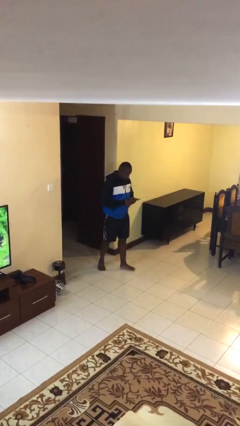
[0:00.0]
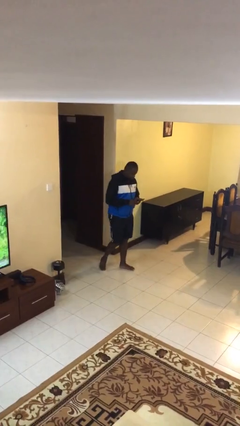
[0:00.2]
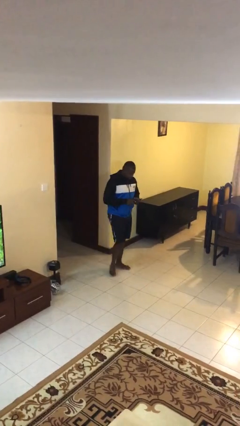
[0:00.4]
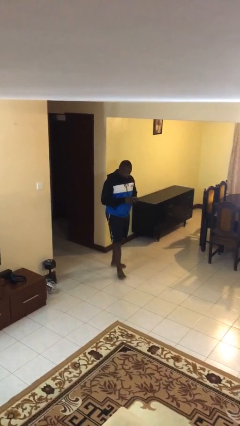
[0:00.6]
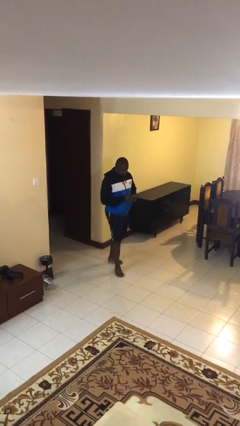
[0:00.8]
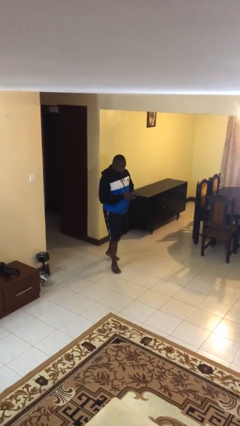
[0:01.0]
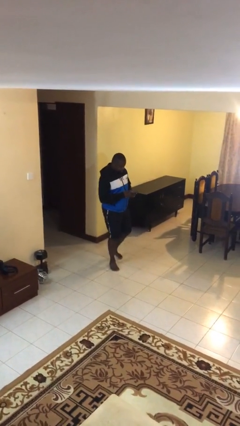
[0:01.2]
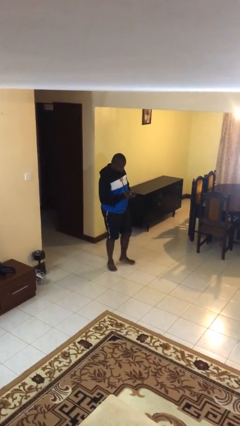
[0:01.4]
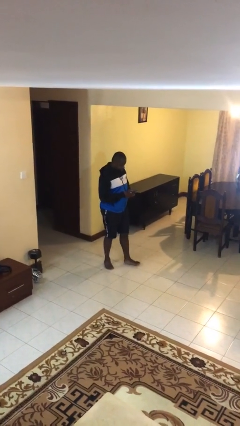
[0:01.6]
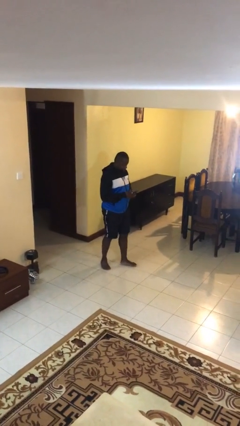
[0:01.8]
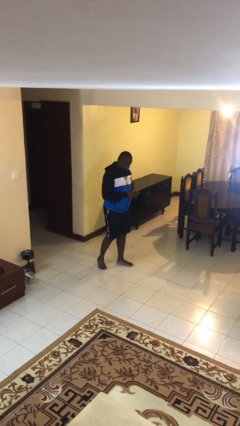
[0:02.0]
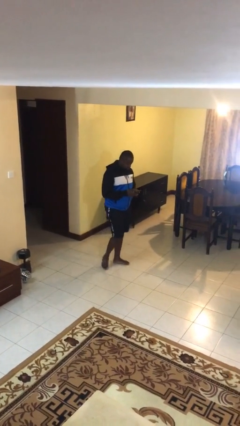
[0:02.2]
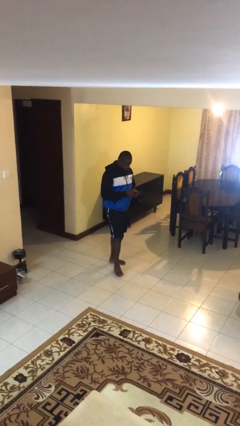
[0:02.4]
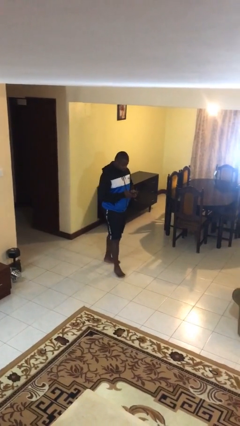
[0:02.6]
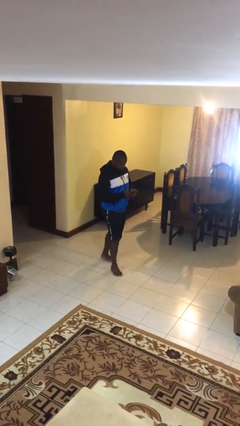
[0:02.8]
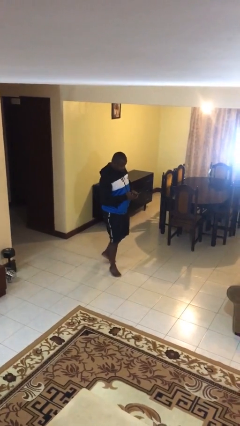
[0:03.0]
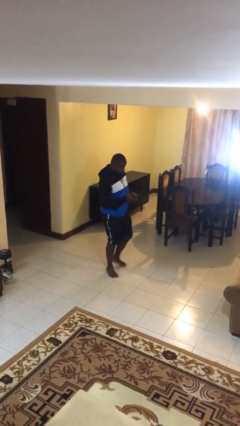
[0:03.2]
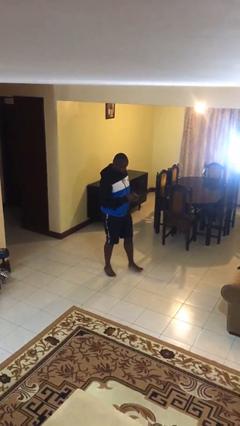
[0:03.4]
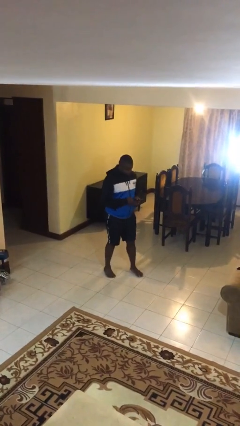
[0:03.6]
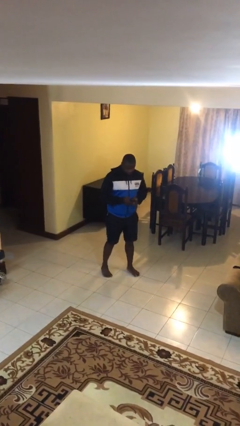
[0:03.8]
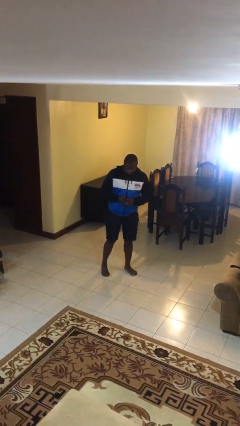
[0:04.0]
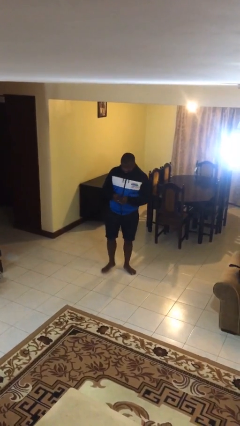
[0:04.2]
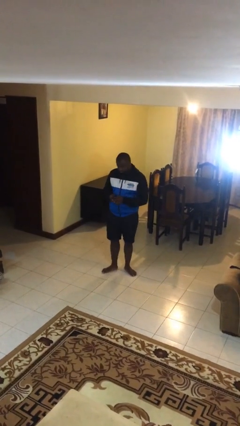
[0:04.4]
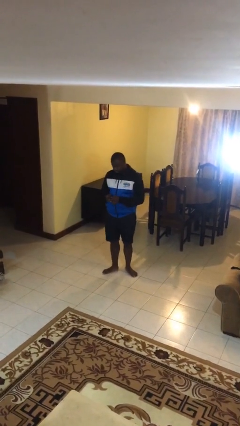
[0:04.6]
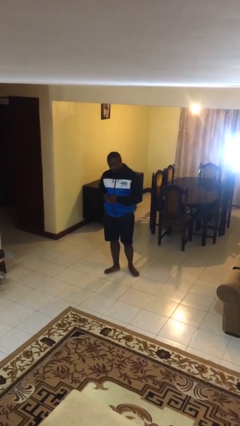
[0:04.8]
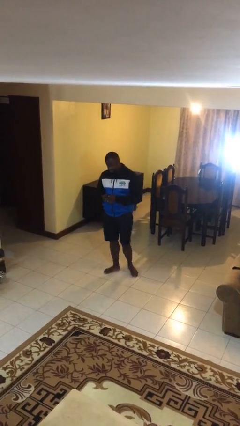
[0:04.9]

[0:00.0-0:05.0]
person texts on phone

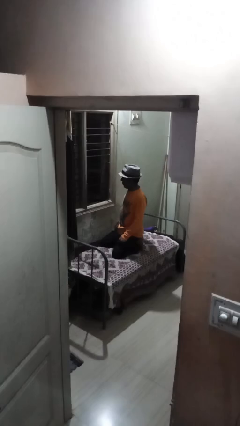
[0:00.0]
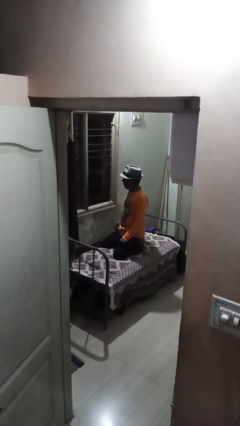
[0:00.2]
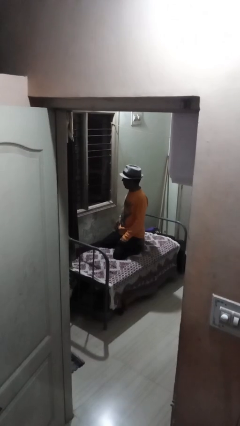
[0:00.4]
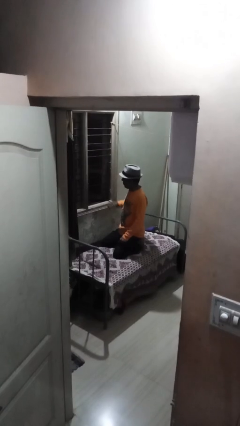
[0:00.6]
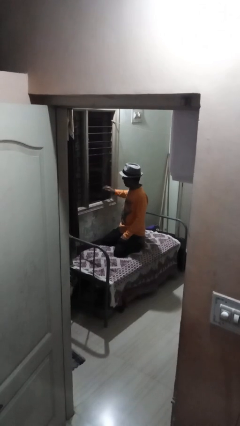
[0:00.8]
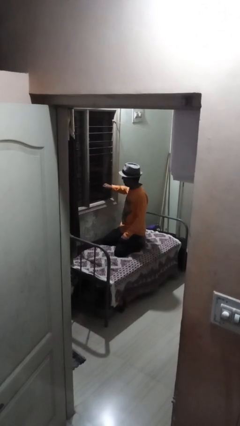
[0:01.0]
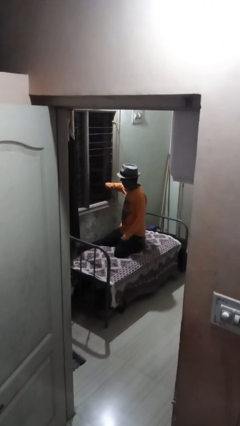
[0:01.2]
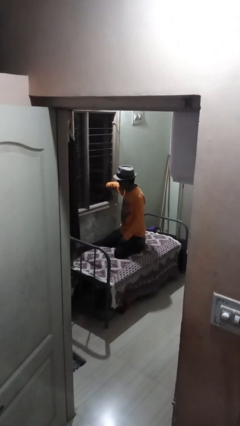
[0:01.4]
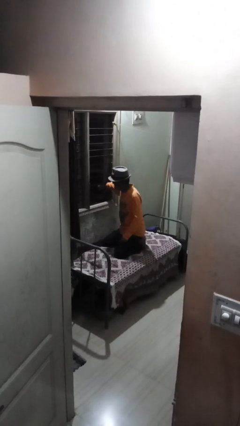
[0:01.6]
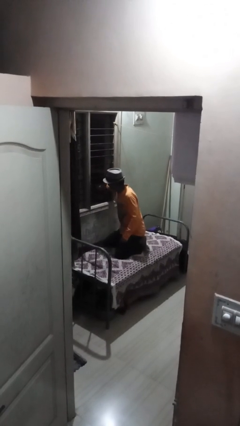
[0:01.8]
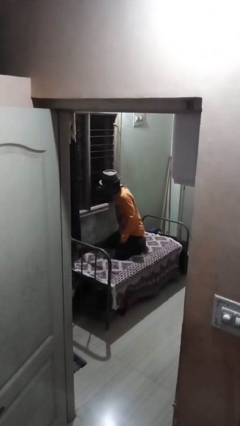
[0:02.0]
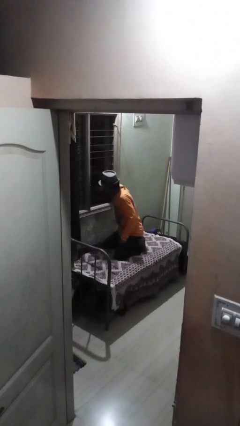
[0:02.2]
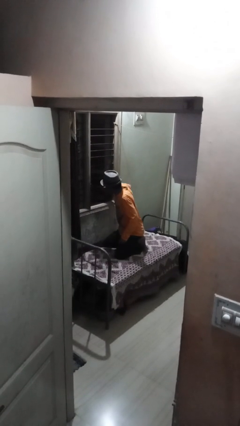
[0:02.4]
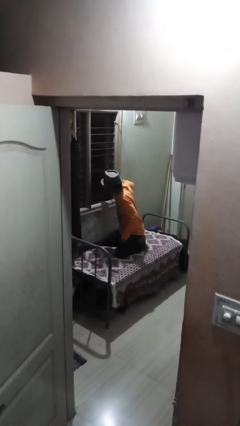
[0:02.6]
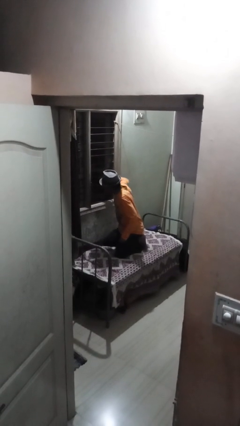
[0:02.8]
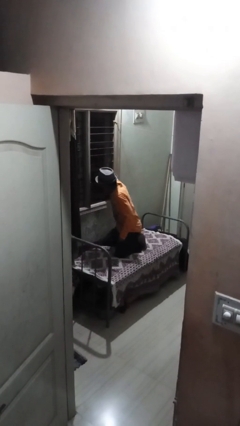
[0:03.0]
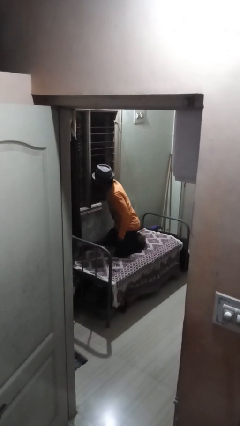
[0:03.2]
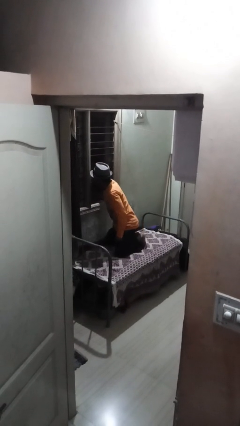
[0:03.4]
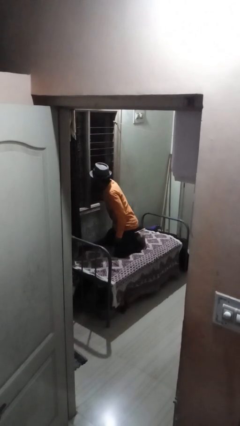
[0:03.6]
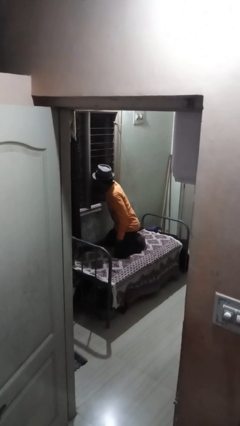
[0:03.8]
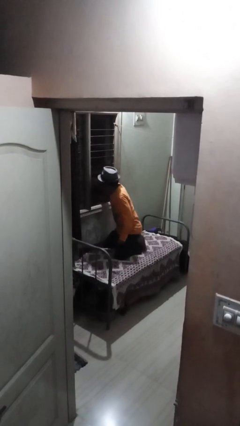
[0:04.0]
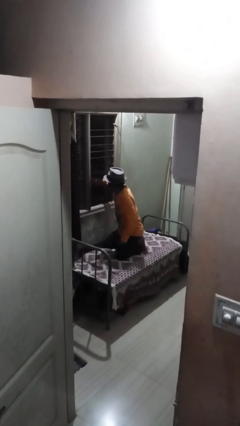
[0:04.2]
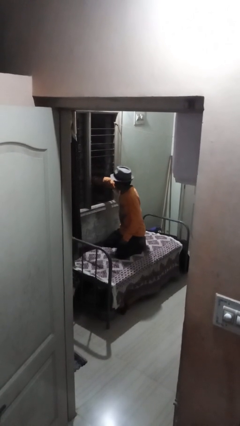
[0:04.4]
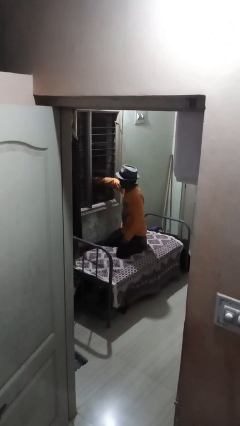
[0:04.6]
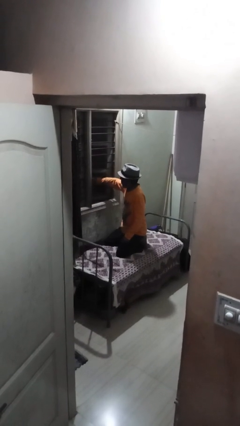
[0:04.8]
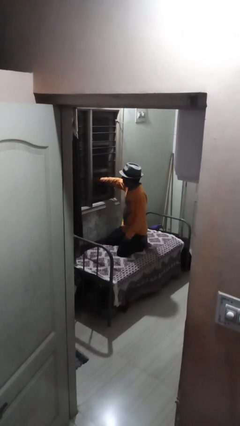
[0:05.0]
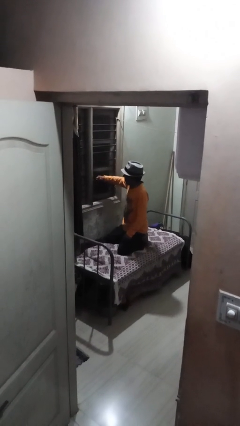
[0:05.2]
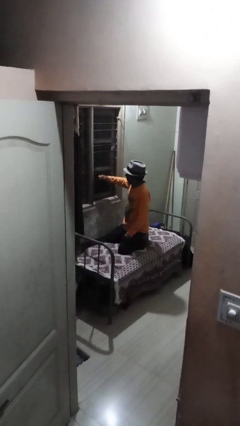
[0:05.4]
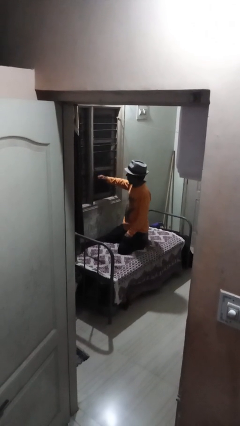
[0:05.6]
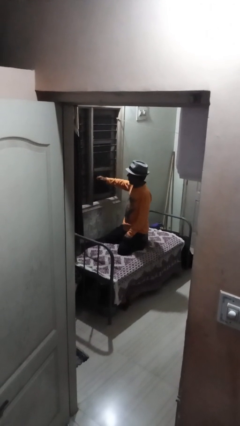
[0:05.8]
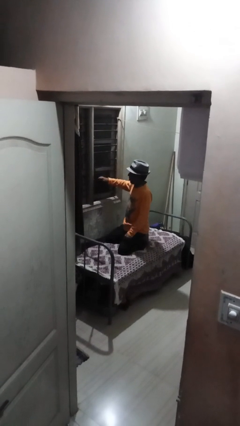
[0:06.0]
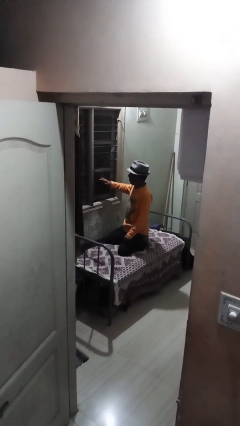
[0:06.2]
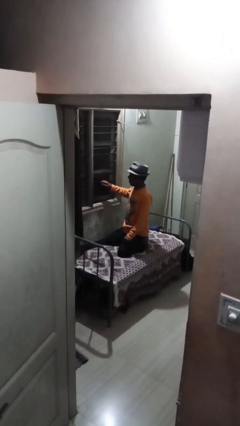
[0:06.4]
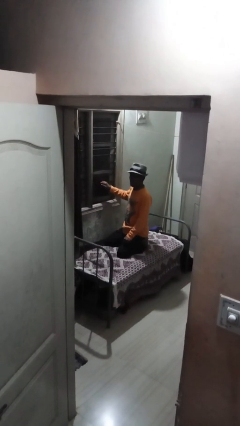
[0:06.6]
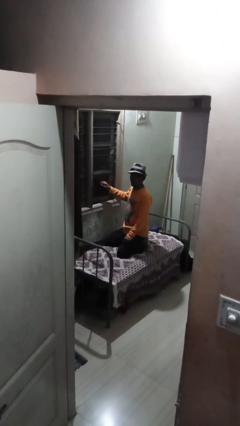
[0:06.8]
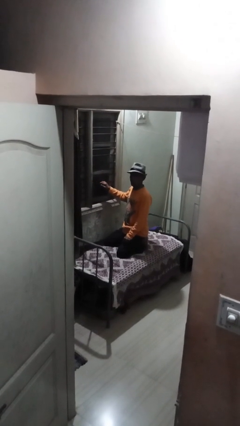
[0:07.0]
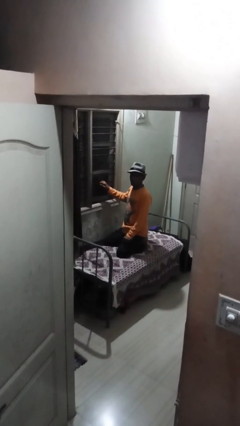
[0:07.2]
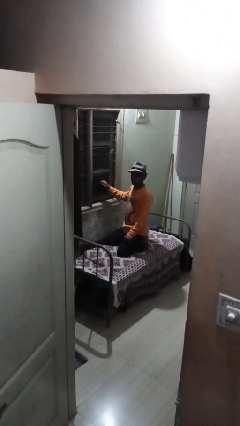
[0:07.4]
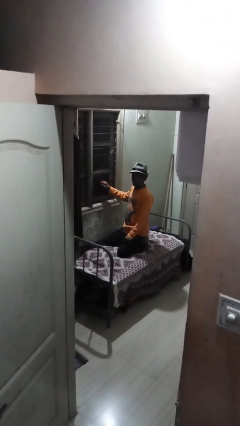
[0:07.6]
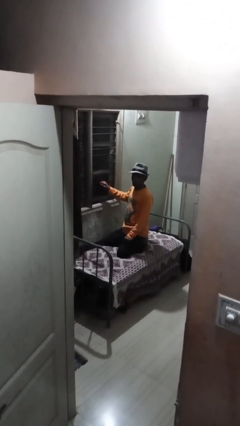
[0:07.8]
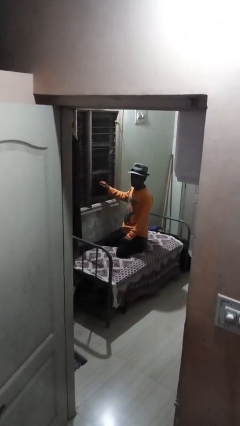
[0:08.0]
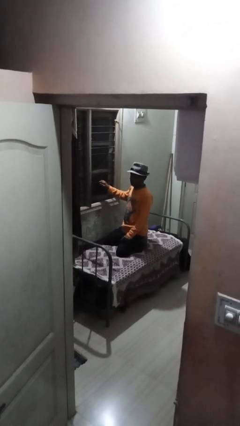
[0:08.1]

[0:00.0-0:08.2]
person closes home window

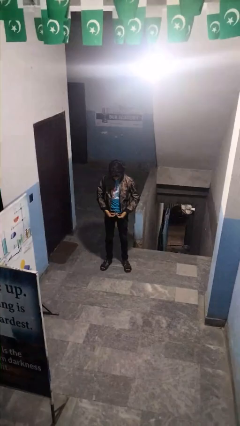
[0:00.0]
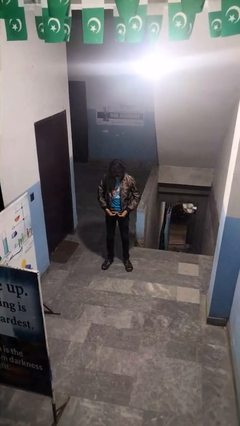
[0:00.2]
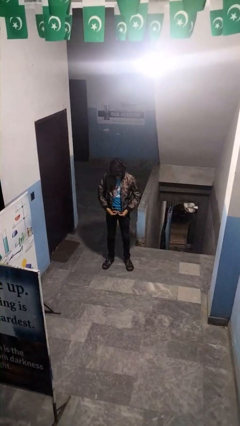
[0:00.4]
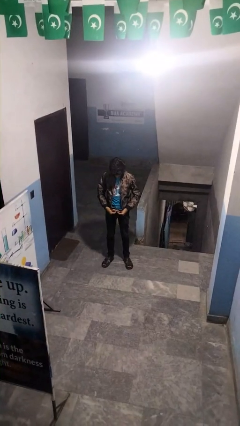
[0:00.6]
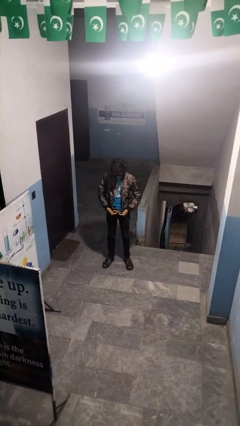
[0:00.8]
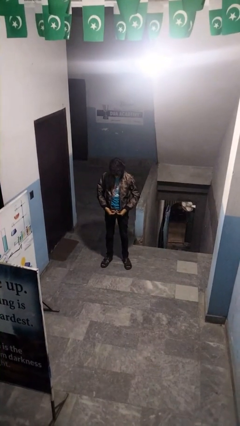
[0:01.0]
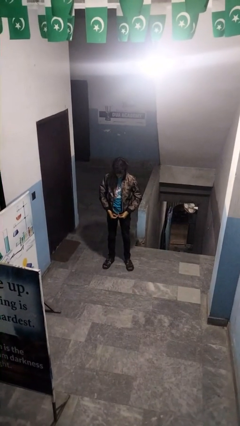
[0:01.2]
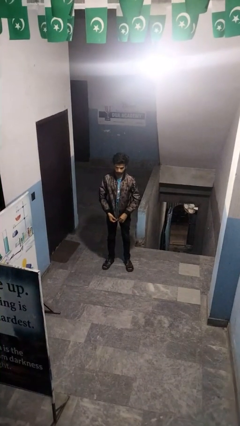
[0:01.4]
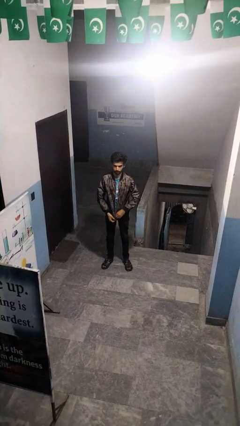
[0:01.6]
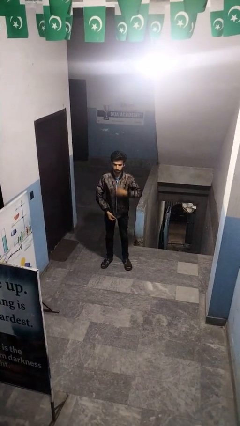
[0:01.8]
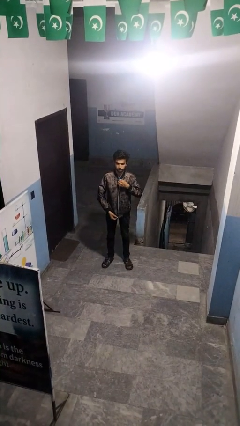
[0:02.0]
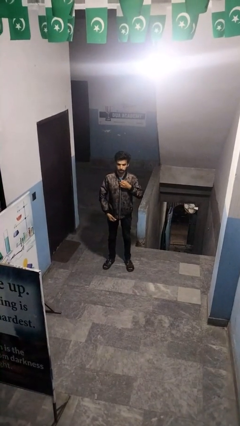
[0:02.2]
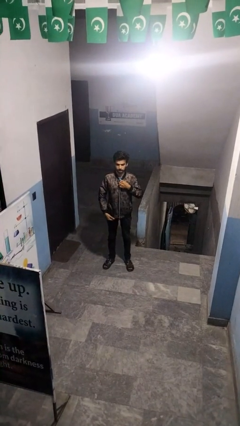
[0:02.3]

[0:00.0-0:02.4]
person zips up jacket

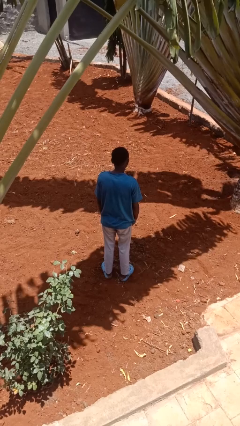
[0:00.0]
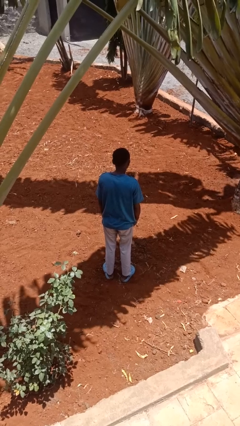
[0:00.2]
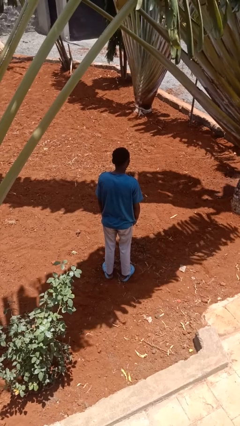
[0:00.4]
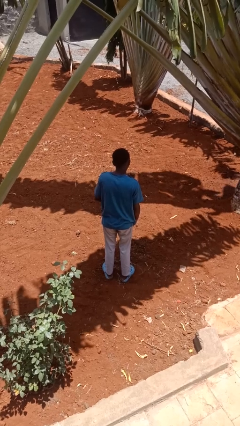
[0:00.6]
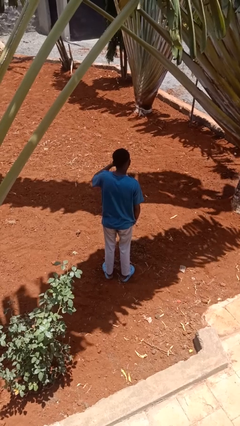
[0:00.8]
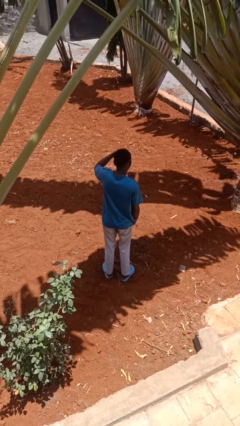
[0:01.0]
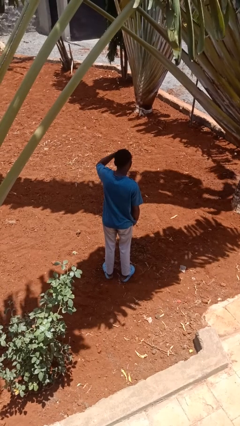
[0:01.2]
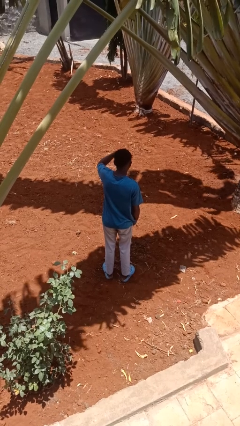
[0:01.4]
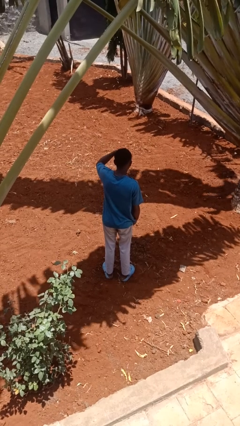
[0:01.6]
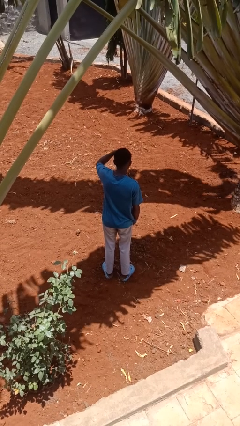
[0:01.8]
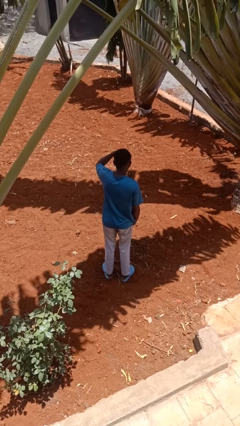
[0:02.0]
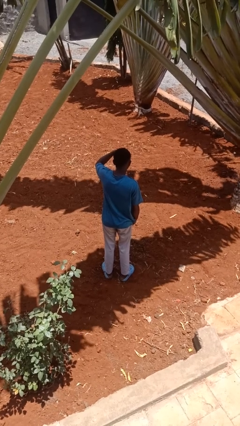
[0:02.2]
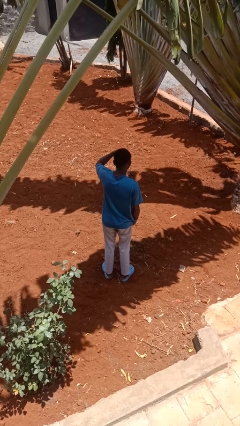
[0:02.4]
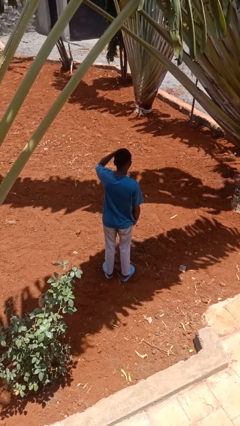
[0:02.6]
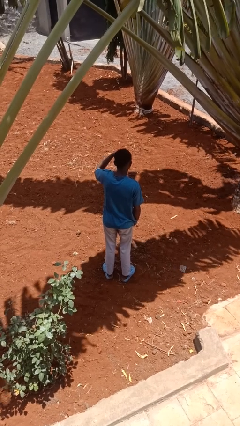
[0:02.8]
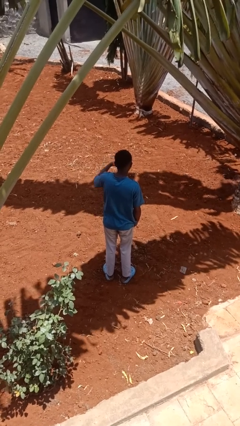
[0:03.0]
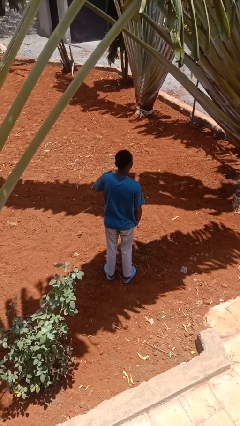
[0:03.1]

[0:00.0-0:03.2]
person shades eyes
